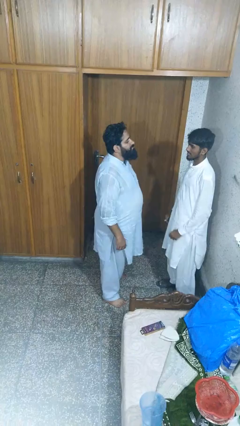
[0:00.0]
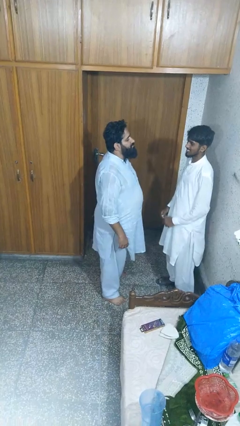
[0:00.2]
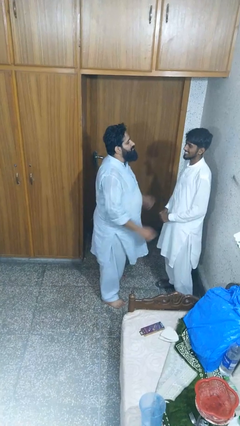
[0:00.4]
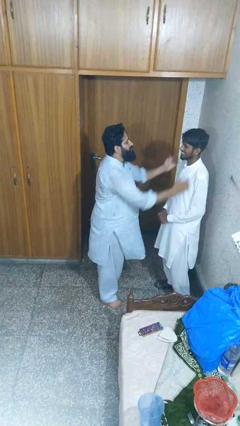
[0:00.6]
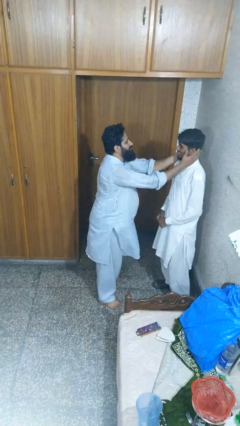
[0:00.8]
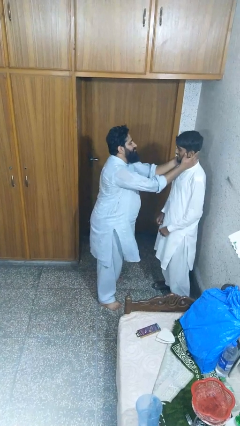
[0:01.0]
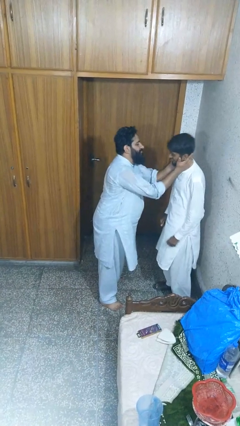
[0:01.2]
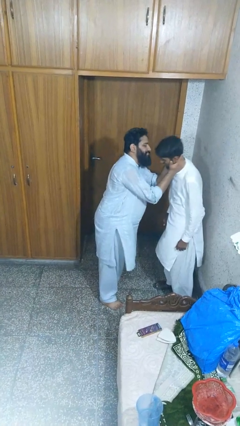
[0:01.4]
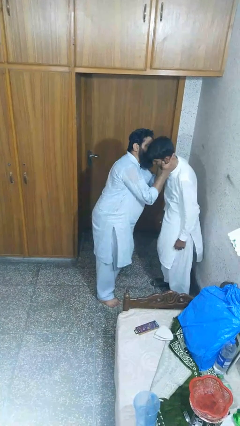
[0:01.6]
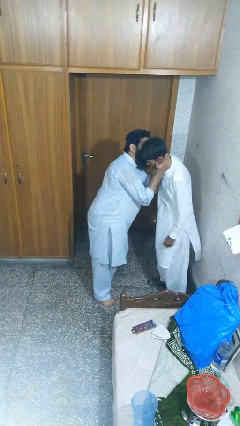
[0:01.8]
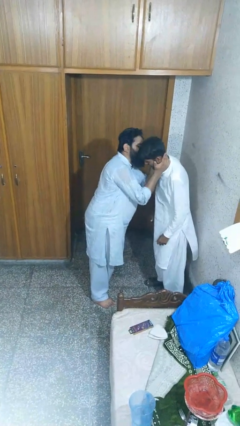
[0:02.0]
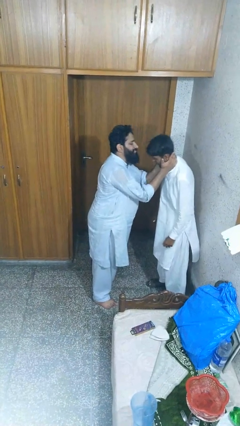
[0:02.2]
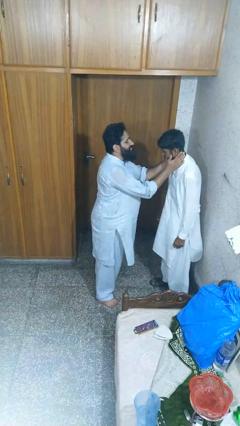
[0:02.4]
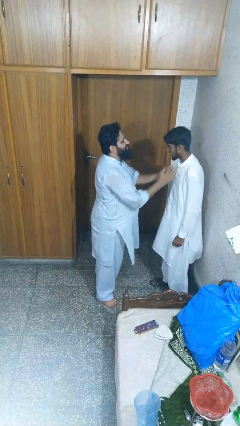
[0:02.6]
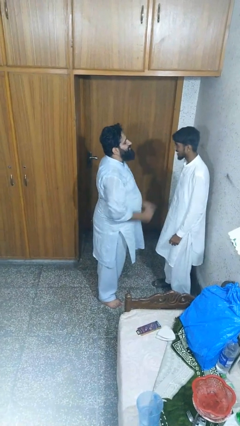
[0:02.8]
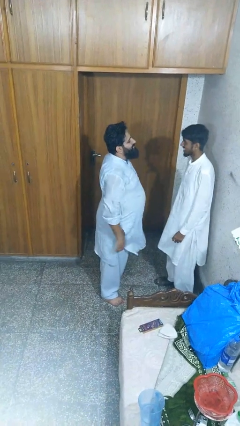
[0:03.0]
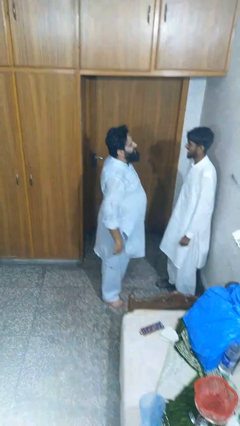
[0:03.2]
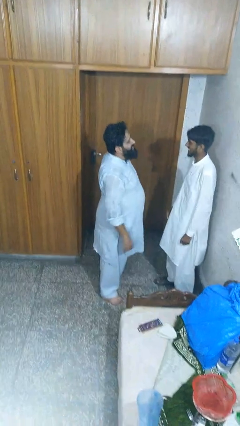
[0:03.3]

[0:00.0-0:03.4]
person kisses cheek of person

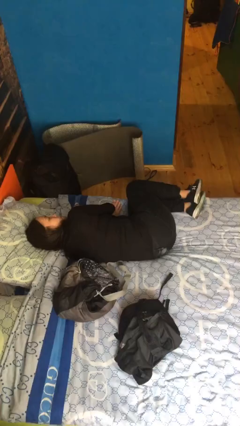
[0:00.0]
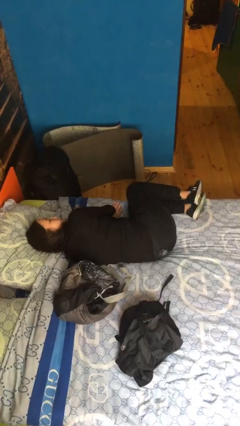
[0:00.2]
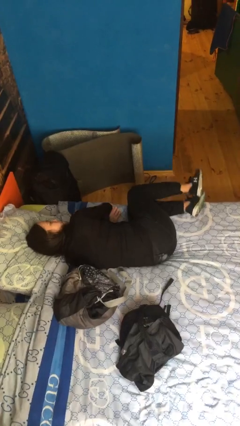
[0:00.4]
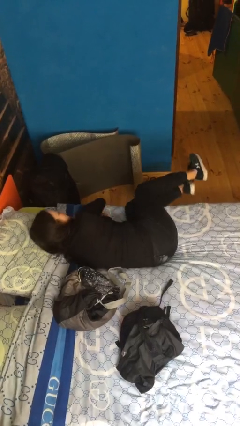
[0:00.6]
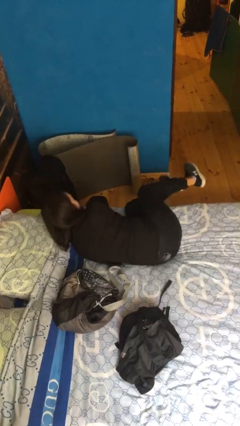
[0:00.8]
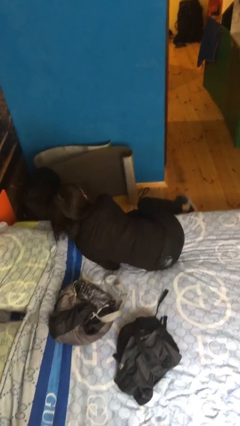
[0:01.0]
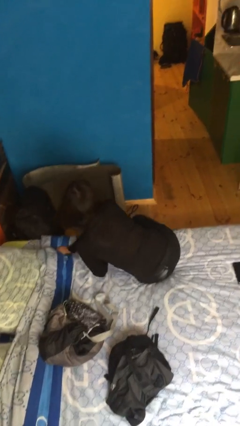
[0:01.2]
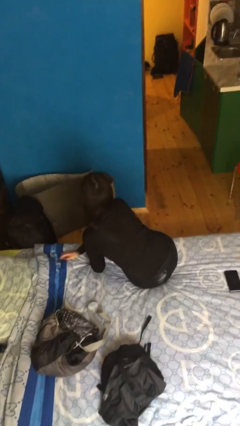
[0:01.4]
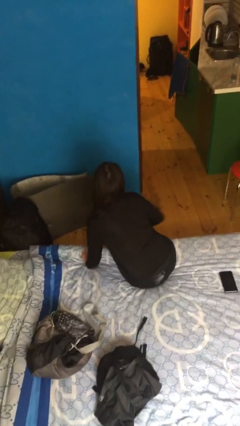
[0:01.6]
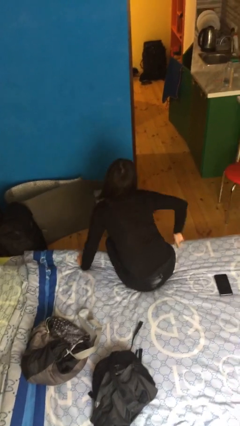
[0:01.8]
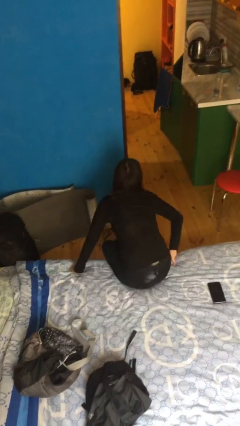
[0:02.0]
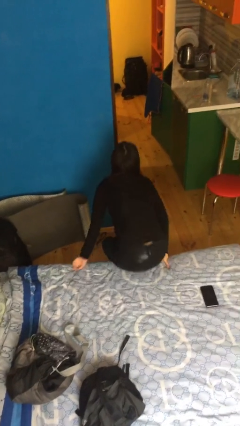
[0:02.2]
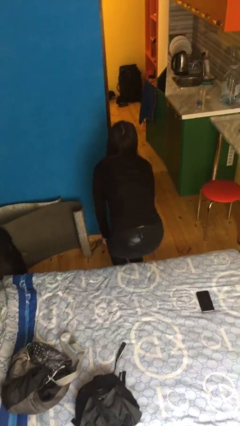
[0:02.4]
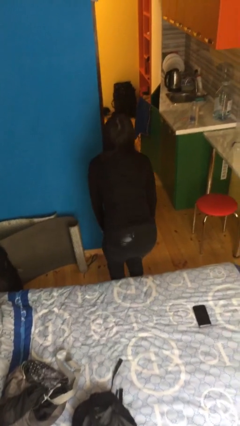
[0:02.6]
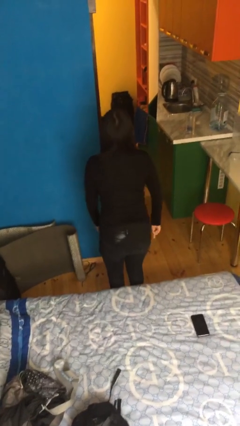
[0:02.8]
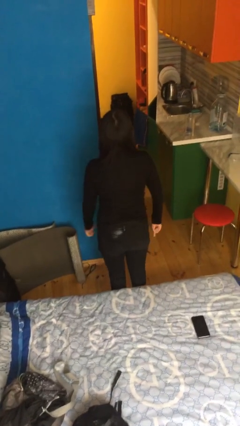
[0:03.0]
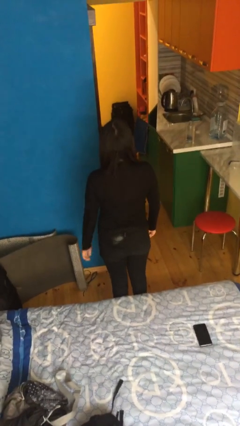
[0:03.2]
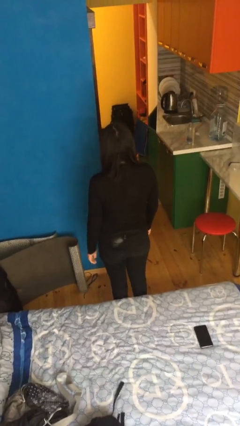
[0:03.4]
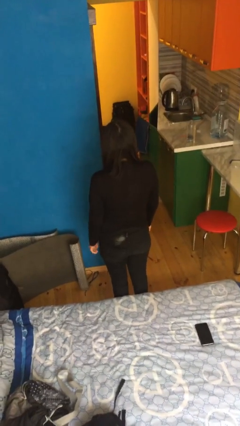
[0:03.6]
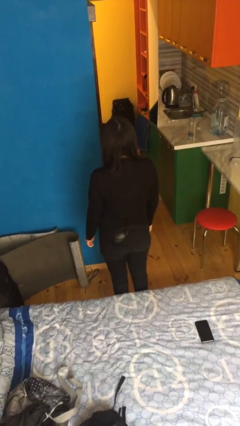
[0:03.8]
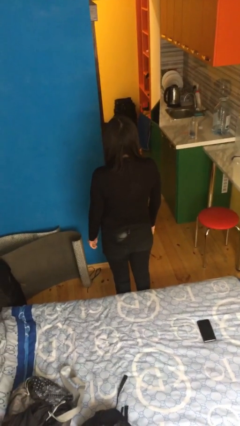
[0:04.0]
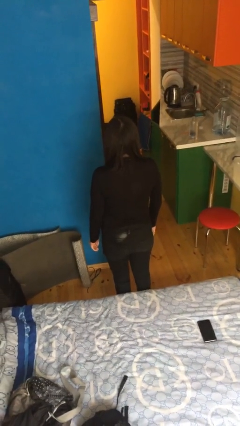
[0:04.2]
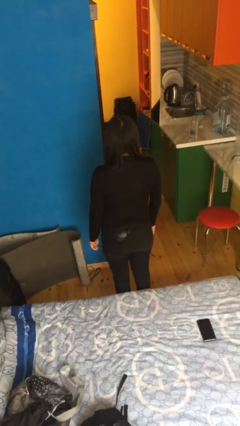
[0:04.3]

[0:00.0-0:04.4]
person stands up

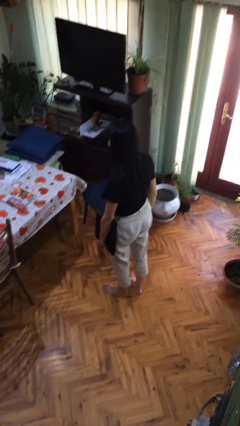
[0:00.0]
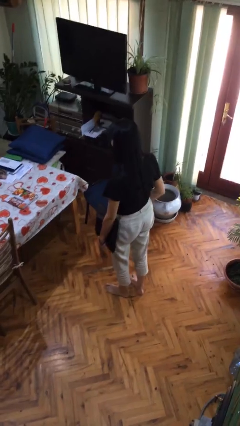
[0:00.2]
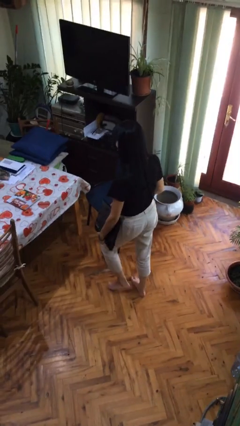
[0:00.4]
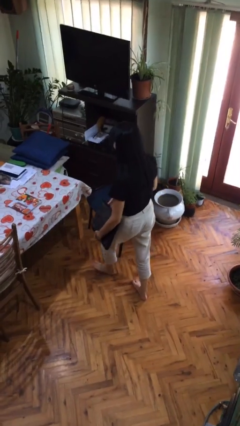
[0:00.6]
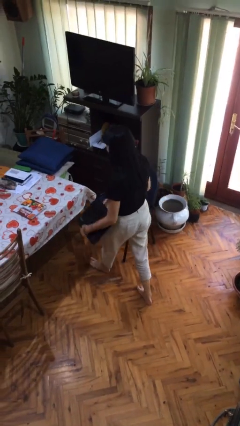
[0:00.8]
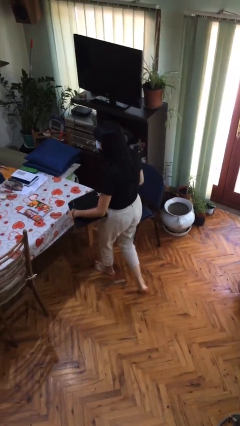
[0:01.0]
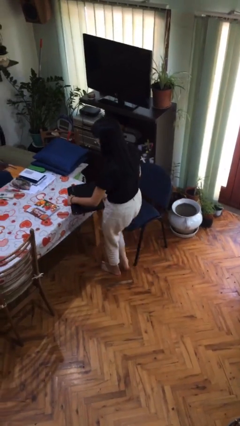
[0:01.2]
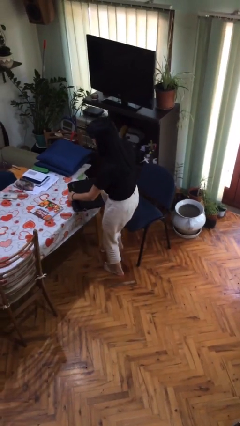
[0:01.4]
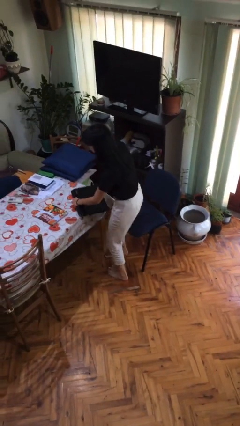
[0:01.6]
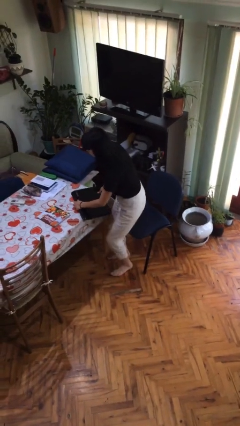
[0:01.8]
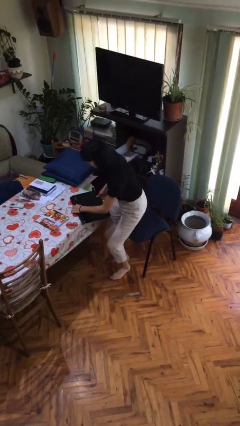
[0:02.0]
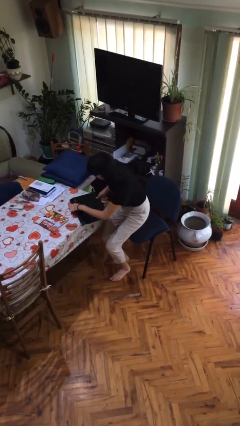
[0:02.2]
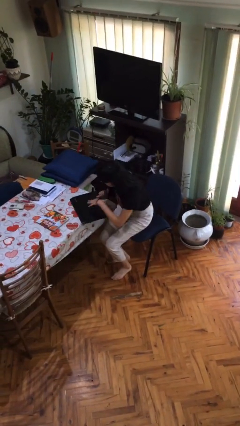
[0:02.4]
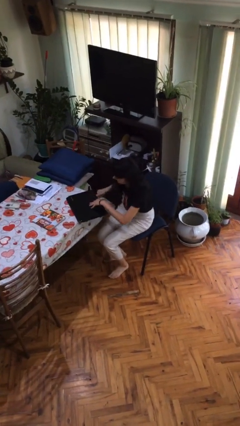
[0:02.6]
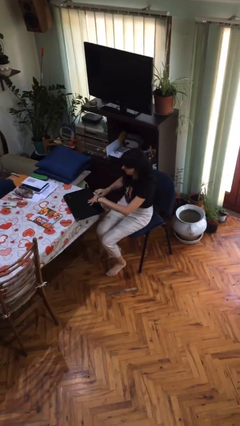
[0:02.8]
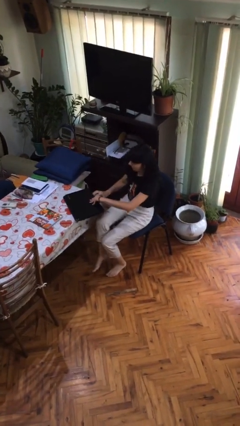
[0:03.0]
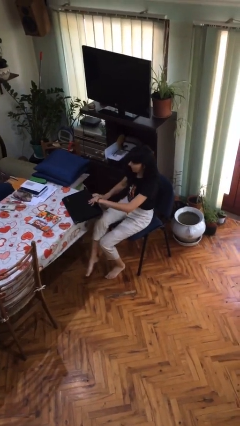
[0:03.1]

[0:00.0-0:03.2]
person sits down

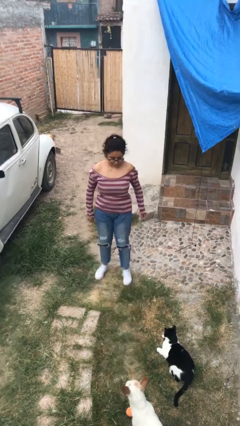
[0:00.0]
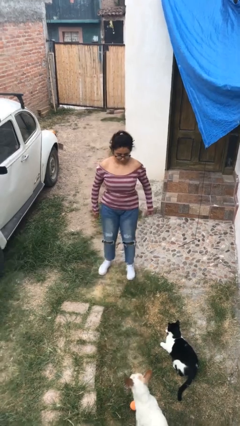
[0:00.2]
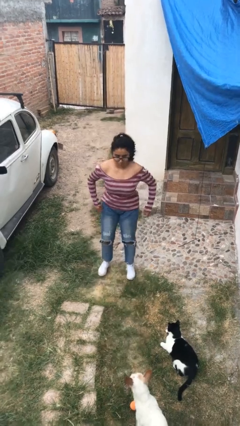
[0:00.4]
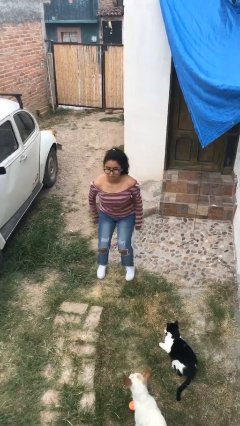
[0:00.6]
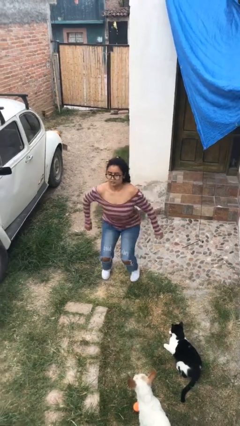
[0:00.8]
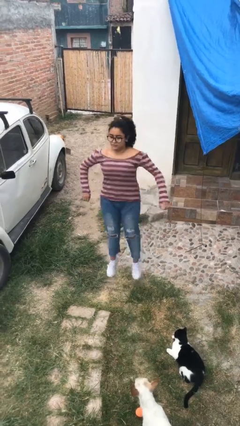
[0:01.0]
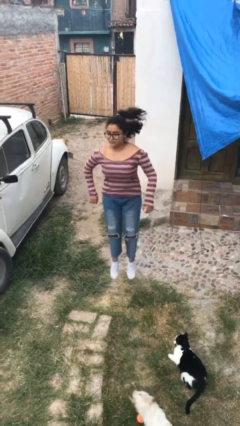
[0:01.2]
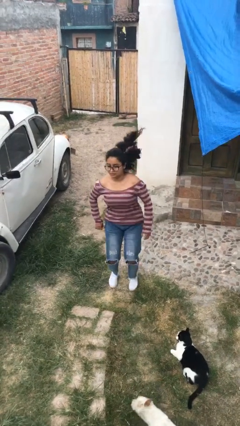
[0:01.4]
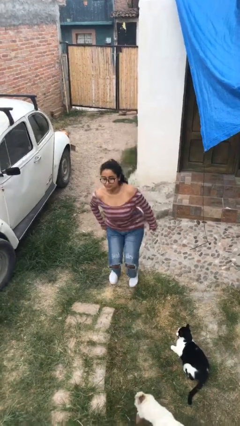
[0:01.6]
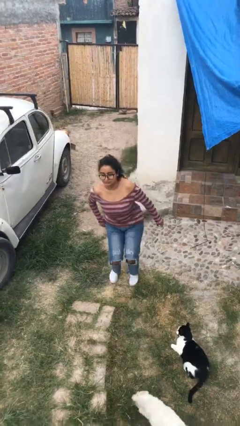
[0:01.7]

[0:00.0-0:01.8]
person jumps

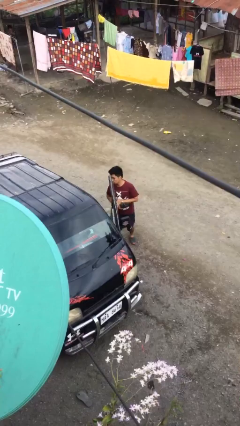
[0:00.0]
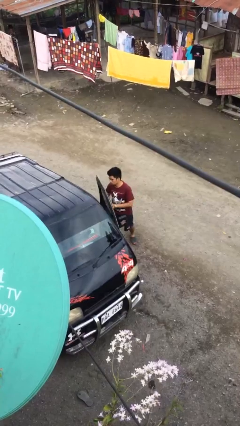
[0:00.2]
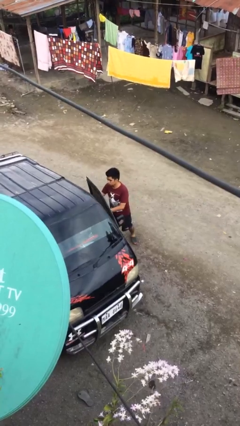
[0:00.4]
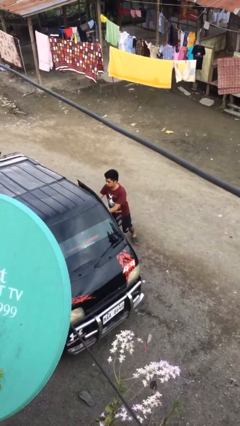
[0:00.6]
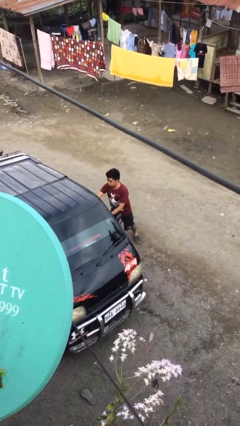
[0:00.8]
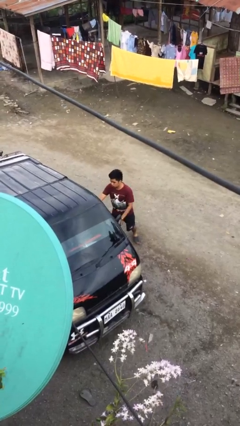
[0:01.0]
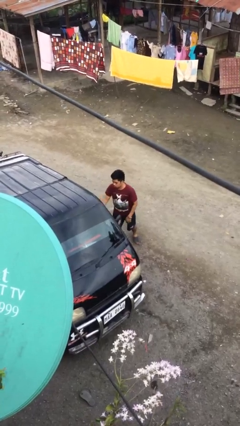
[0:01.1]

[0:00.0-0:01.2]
person closes car door

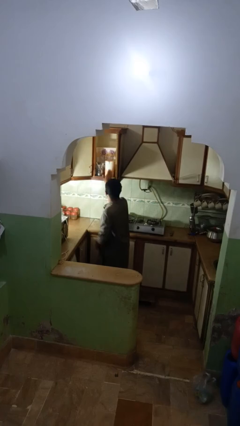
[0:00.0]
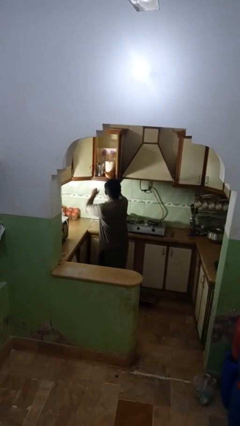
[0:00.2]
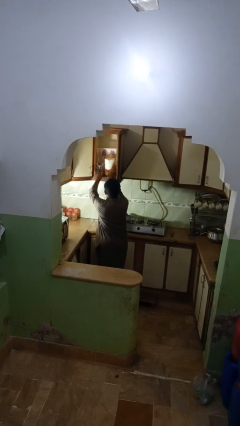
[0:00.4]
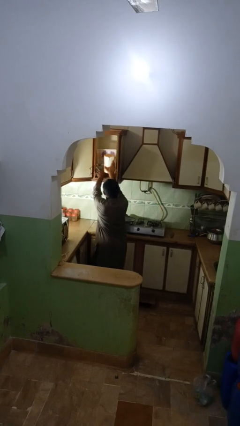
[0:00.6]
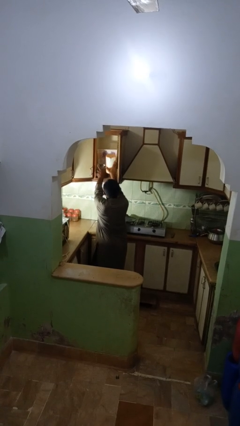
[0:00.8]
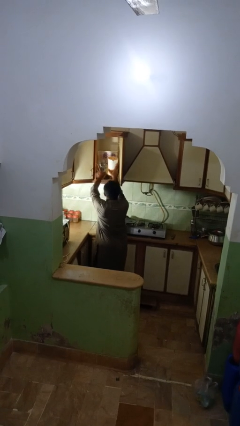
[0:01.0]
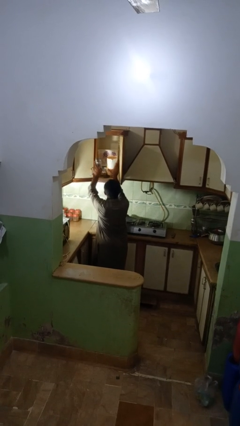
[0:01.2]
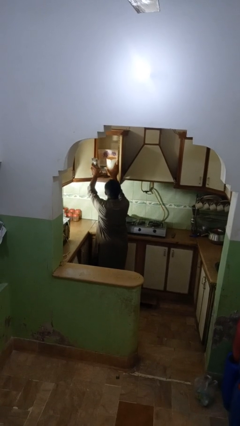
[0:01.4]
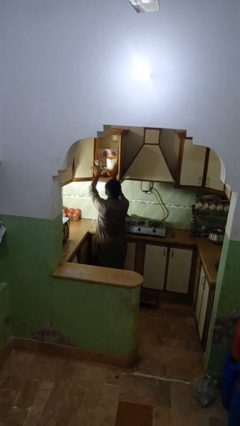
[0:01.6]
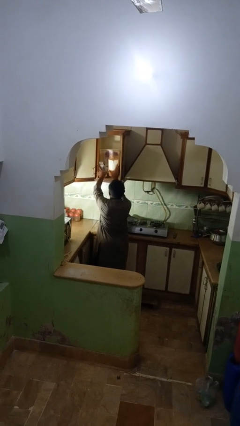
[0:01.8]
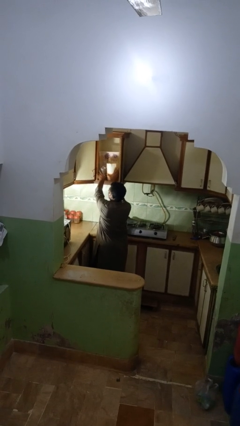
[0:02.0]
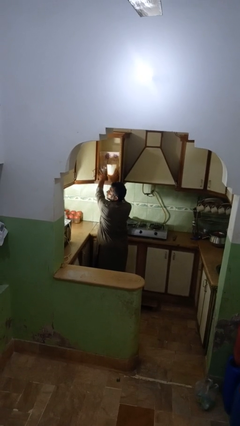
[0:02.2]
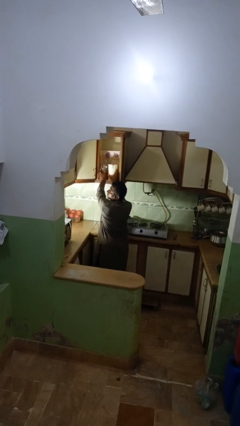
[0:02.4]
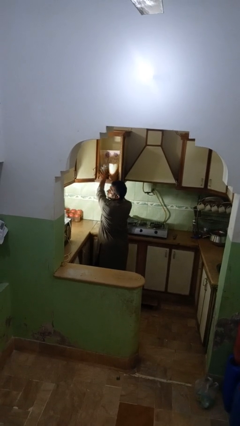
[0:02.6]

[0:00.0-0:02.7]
person searches in kitchen drawer

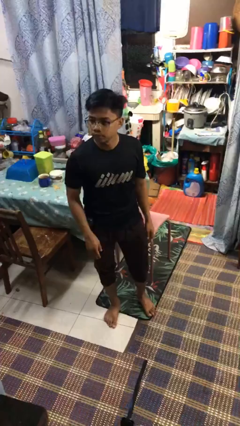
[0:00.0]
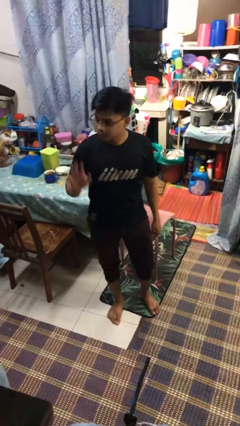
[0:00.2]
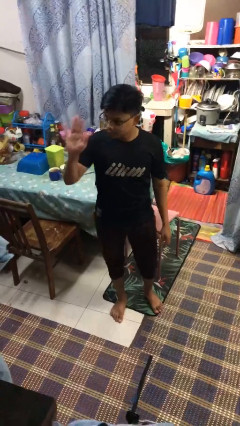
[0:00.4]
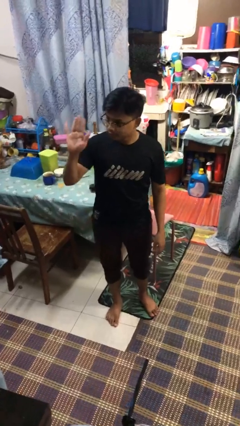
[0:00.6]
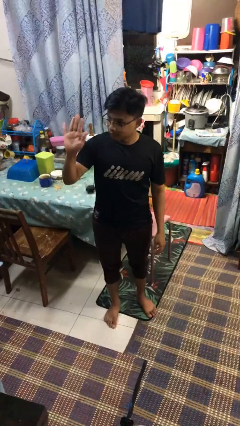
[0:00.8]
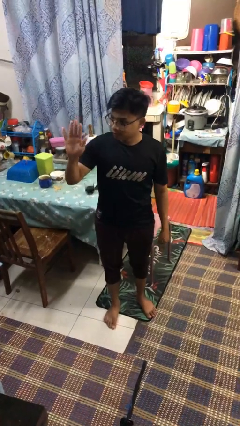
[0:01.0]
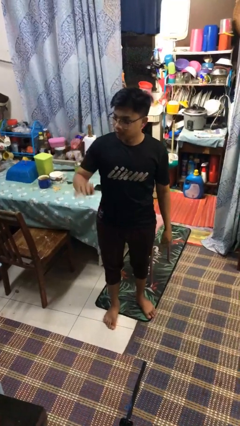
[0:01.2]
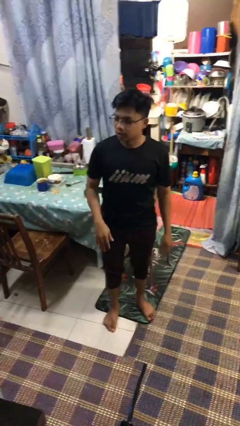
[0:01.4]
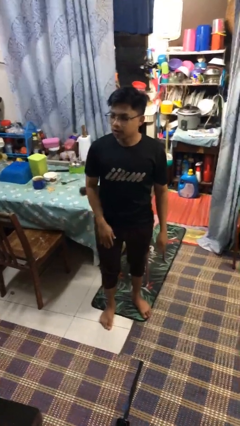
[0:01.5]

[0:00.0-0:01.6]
person gestures stop
